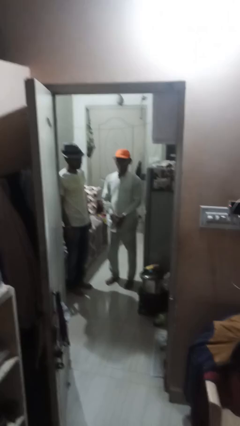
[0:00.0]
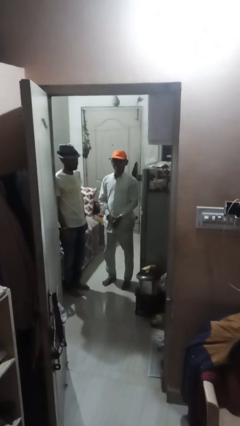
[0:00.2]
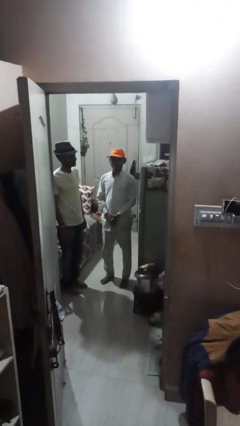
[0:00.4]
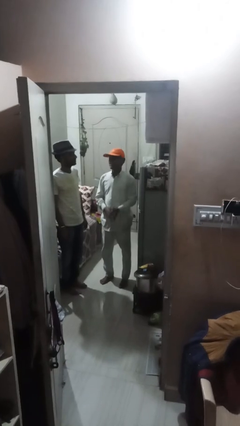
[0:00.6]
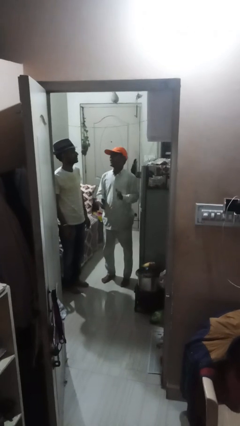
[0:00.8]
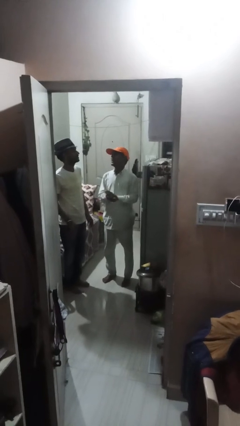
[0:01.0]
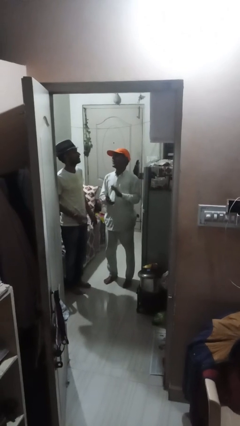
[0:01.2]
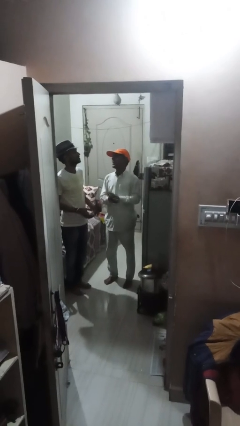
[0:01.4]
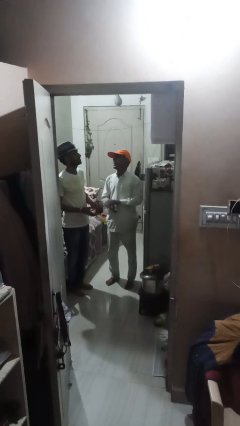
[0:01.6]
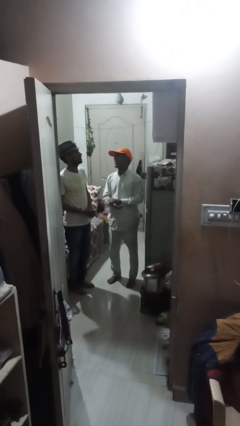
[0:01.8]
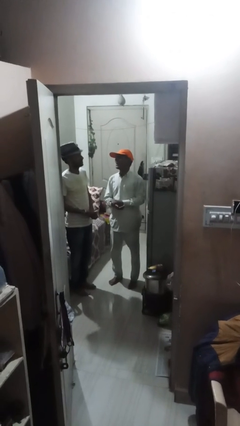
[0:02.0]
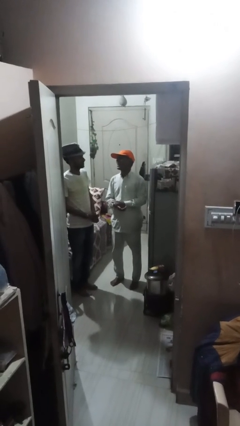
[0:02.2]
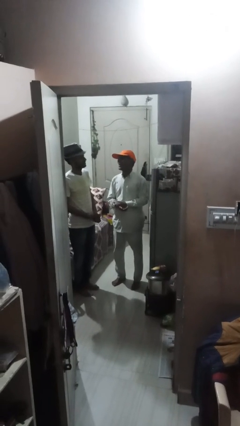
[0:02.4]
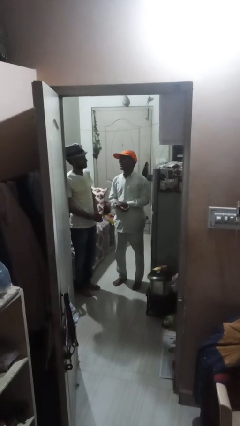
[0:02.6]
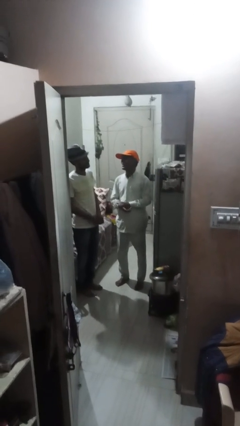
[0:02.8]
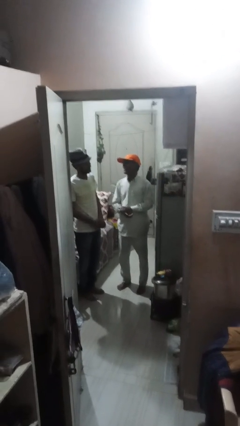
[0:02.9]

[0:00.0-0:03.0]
person laughs with person

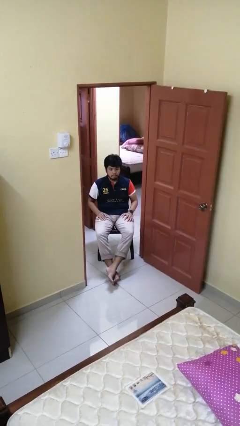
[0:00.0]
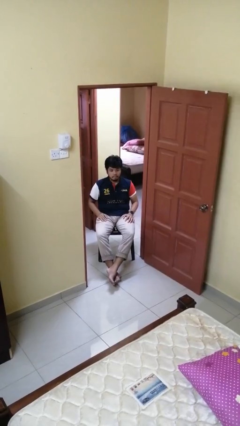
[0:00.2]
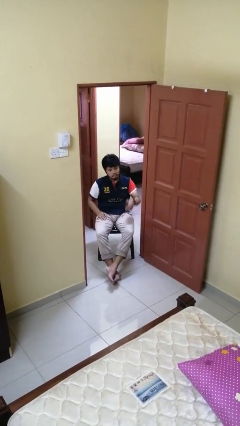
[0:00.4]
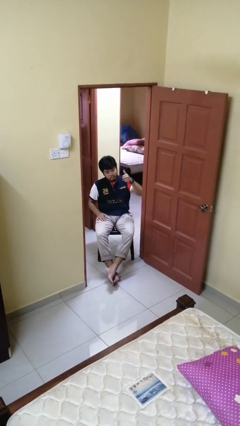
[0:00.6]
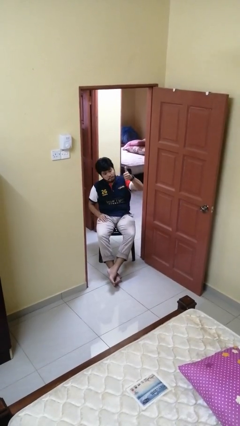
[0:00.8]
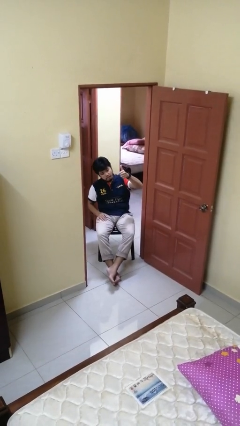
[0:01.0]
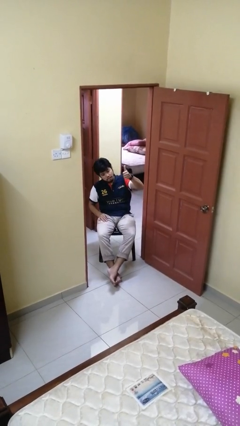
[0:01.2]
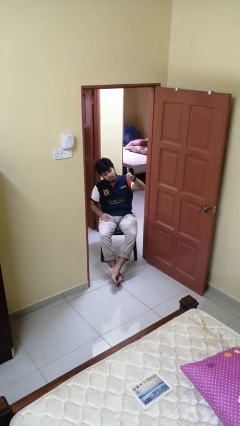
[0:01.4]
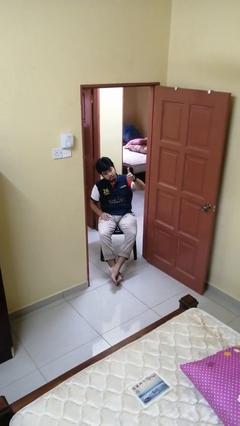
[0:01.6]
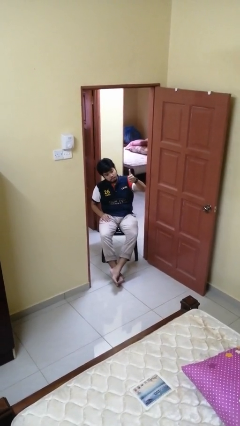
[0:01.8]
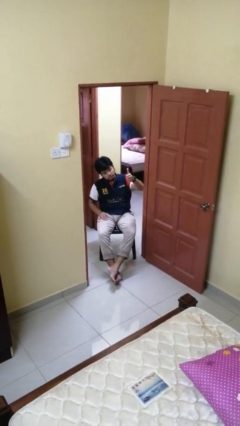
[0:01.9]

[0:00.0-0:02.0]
person gestures thumbs up

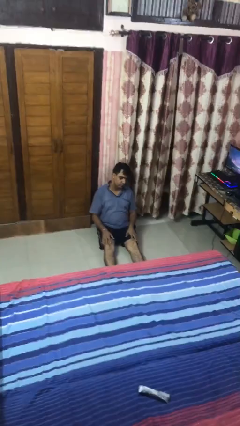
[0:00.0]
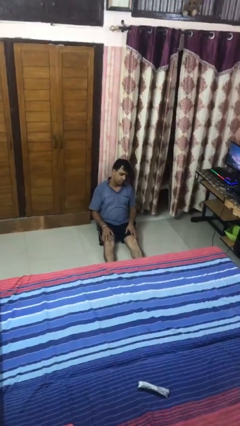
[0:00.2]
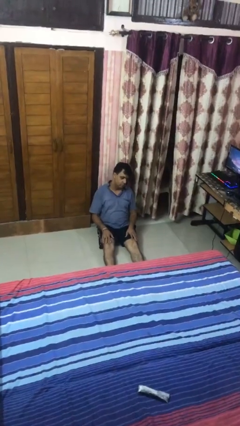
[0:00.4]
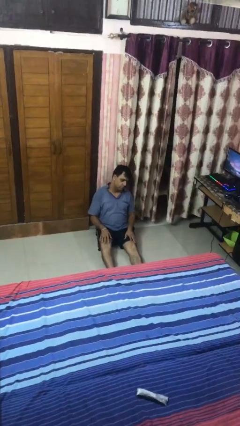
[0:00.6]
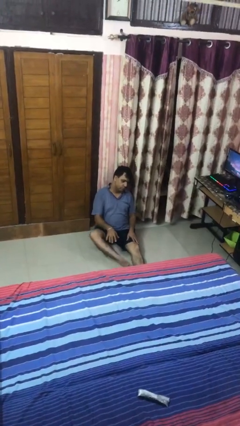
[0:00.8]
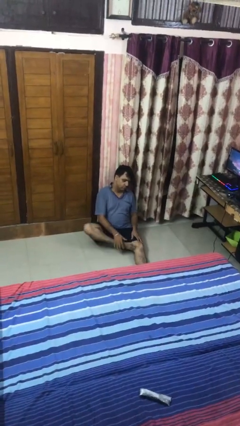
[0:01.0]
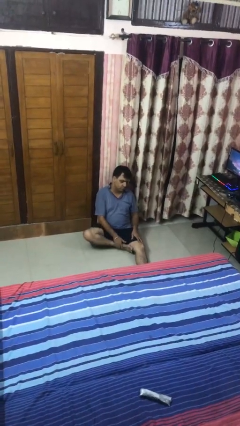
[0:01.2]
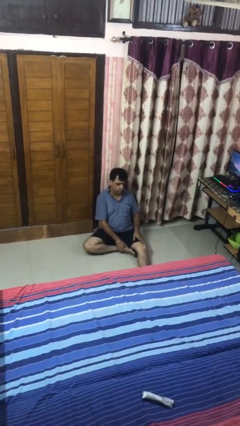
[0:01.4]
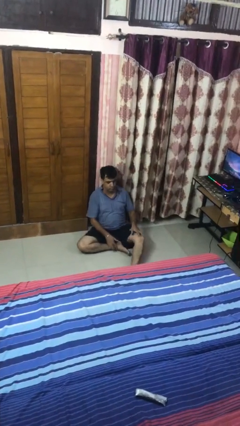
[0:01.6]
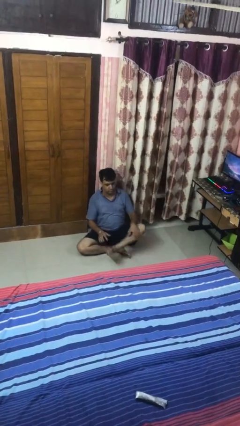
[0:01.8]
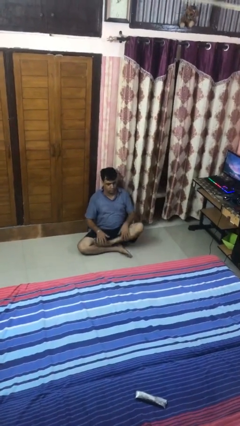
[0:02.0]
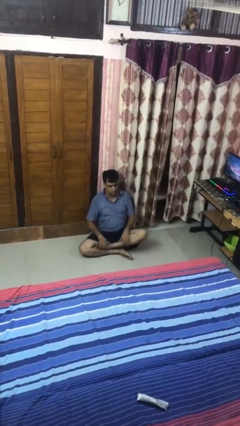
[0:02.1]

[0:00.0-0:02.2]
person crosses legs

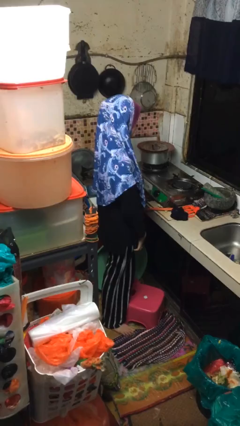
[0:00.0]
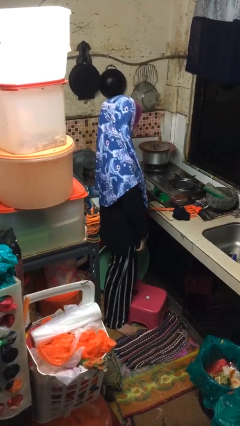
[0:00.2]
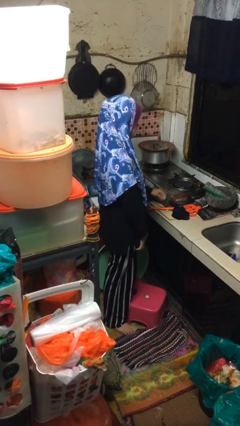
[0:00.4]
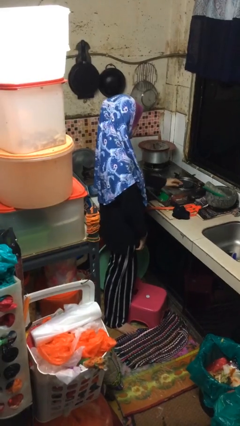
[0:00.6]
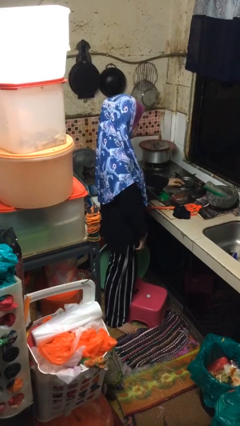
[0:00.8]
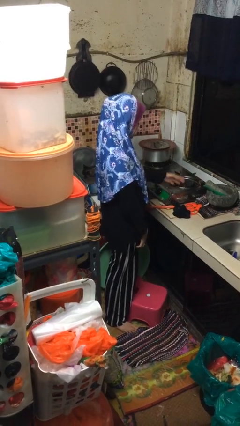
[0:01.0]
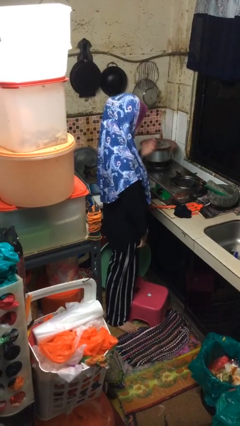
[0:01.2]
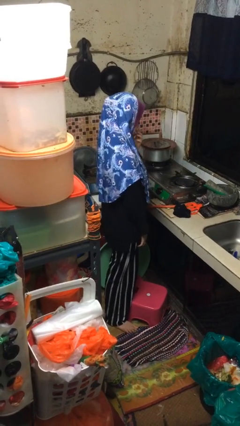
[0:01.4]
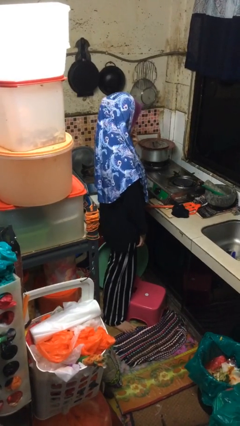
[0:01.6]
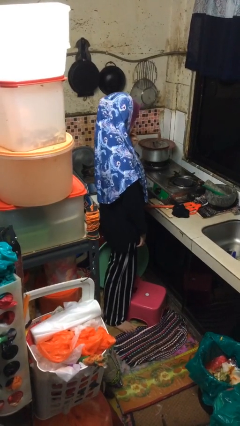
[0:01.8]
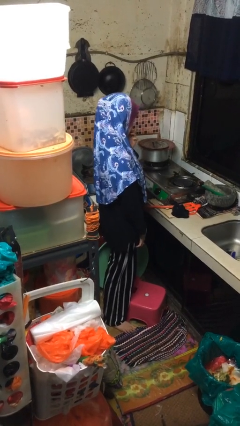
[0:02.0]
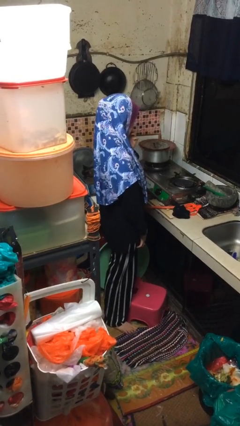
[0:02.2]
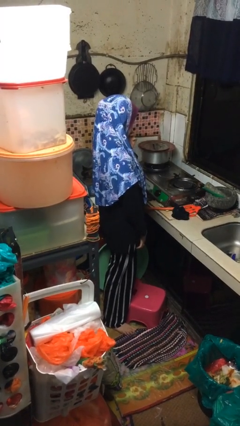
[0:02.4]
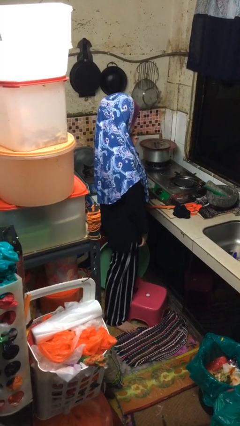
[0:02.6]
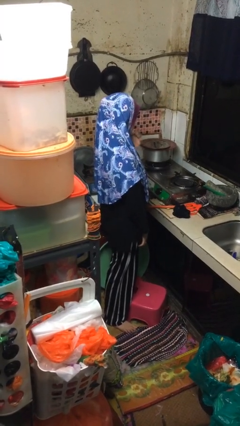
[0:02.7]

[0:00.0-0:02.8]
person burns hand

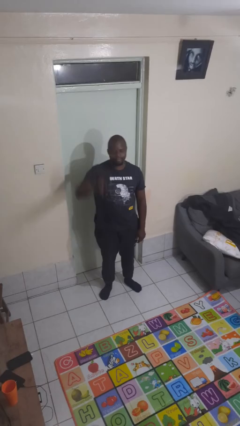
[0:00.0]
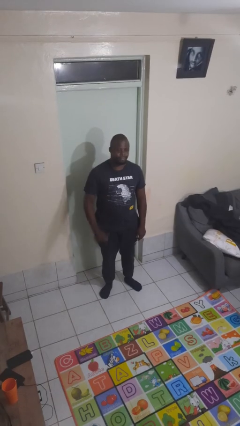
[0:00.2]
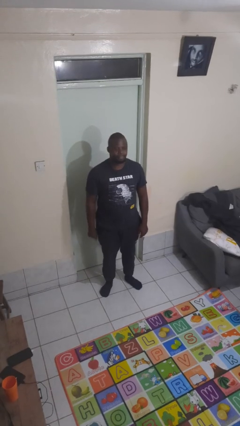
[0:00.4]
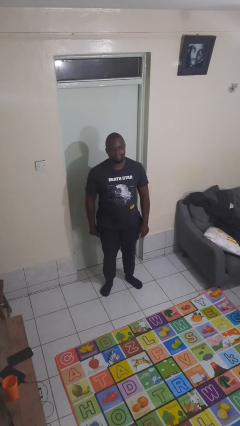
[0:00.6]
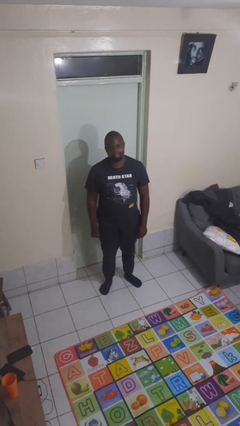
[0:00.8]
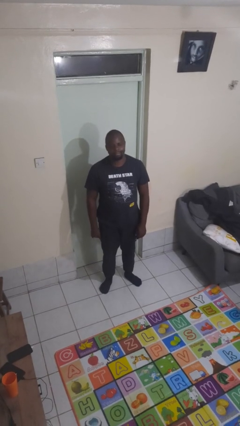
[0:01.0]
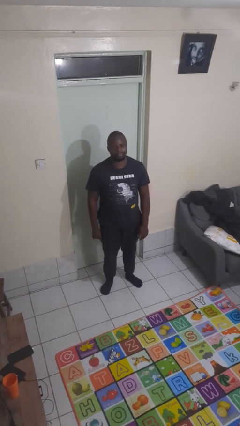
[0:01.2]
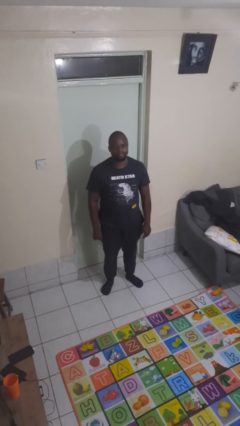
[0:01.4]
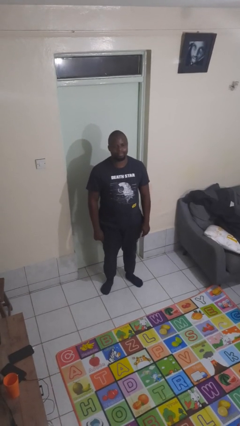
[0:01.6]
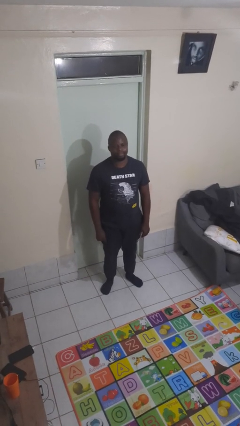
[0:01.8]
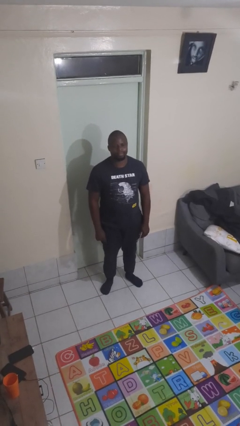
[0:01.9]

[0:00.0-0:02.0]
person gestures lower hand

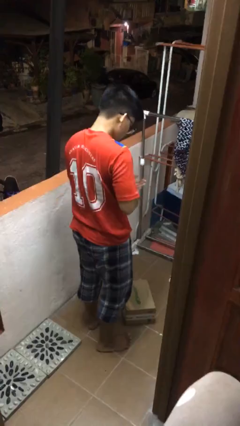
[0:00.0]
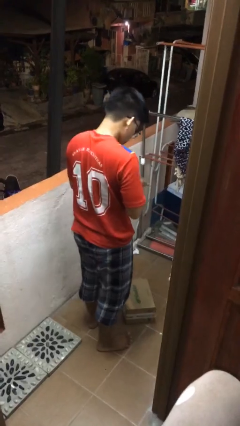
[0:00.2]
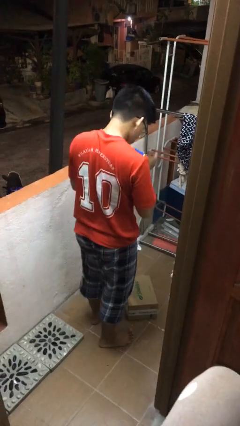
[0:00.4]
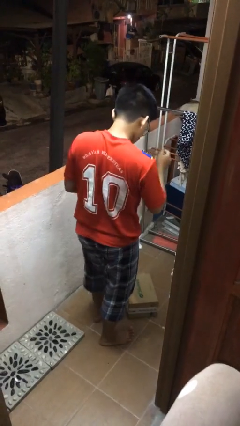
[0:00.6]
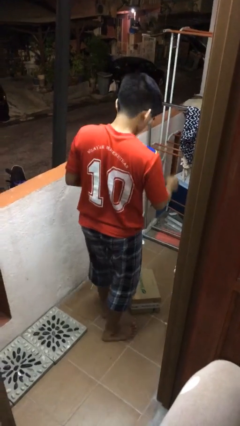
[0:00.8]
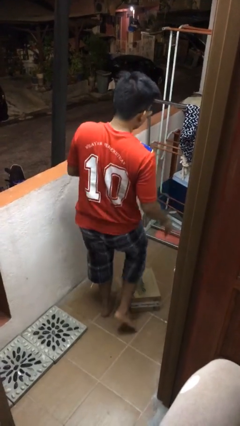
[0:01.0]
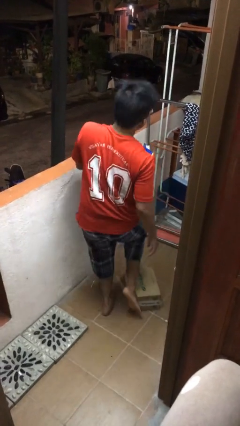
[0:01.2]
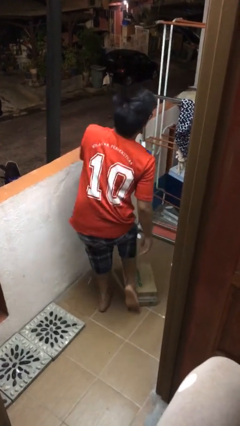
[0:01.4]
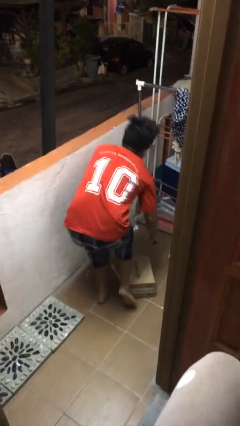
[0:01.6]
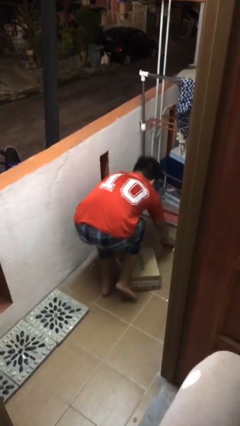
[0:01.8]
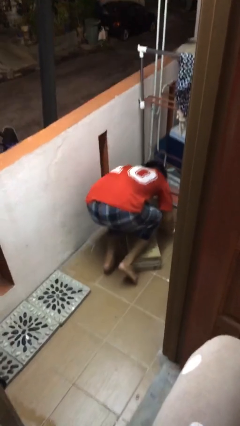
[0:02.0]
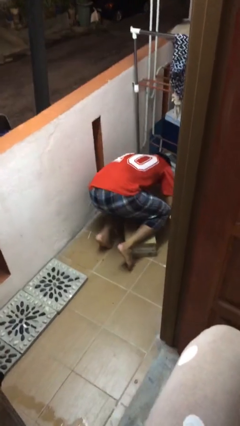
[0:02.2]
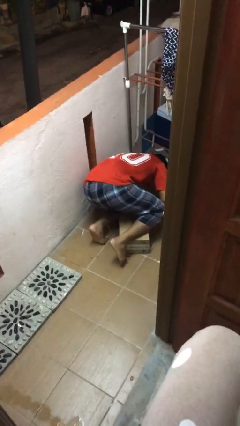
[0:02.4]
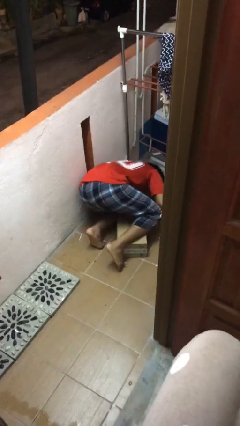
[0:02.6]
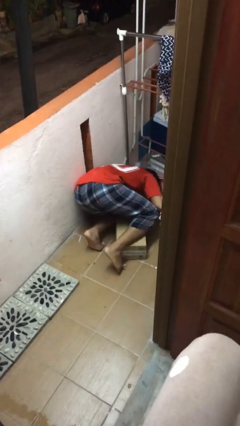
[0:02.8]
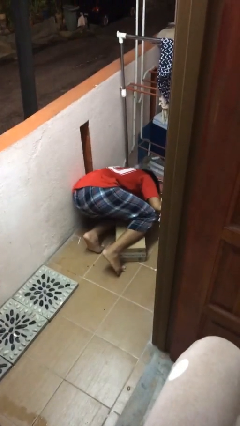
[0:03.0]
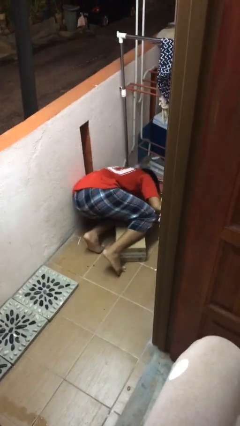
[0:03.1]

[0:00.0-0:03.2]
person trips on object on floor

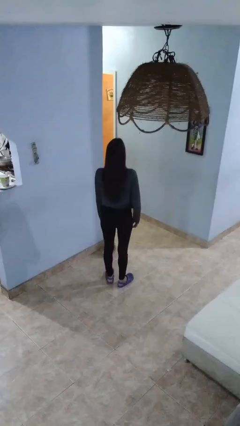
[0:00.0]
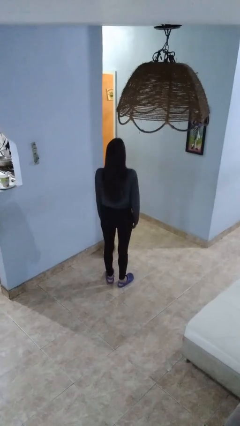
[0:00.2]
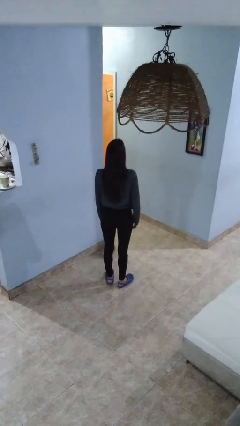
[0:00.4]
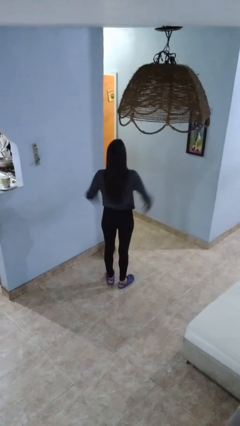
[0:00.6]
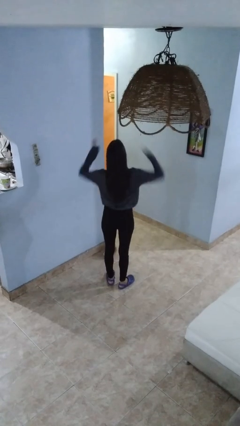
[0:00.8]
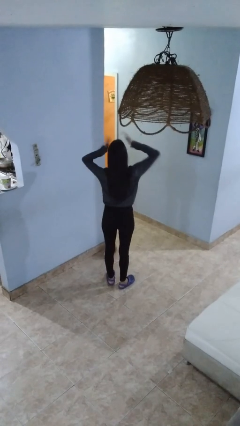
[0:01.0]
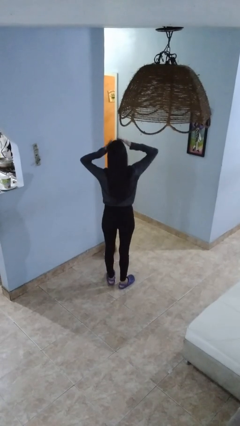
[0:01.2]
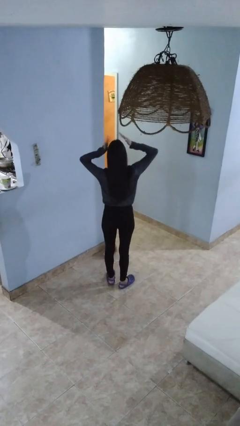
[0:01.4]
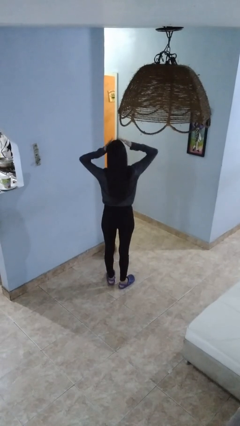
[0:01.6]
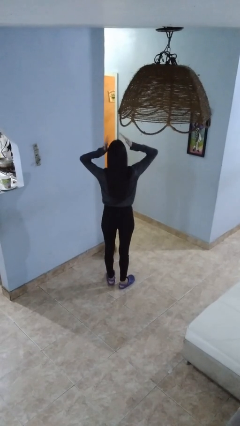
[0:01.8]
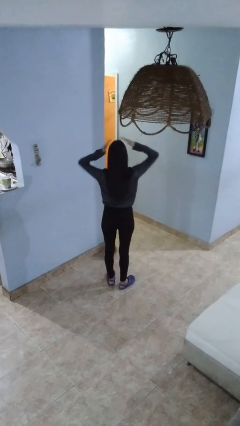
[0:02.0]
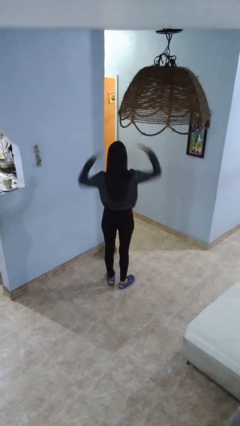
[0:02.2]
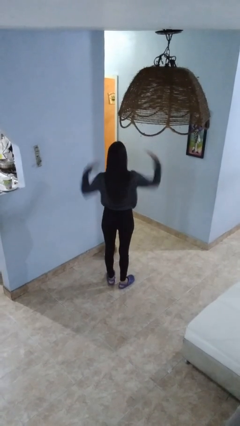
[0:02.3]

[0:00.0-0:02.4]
person pats head
